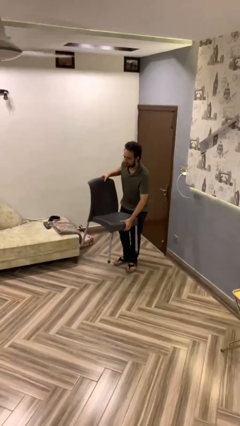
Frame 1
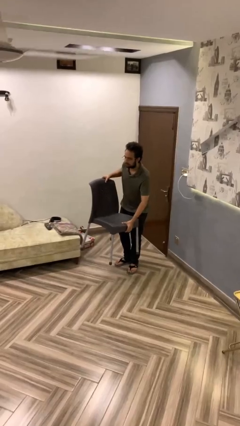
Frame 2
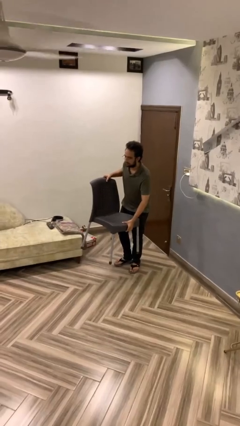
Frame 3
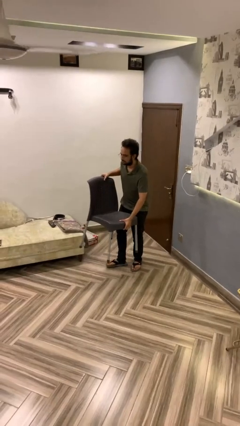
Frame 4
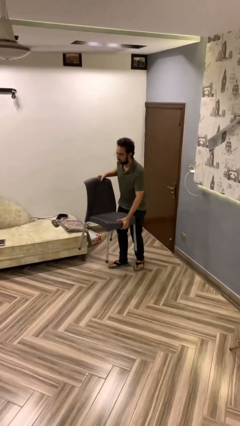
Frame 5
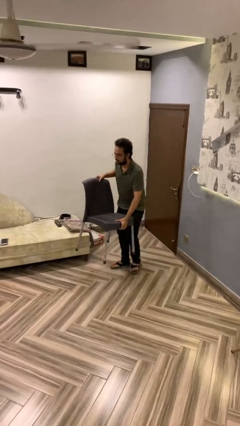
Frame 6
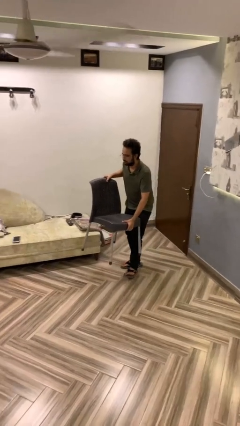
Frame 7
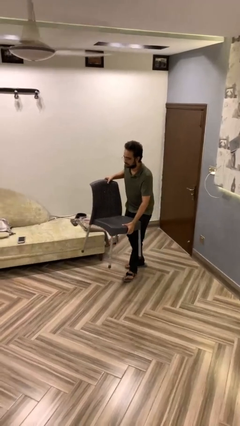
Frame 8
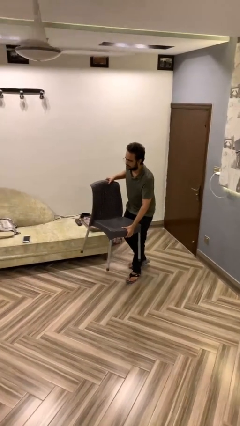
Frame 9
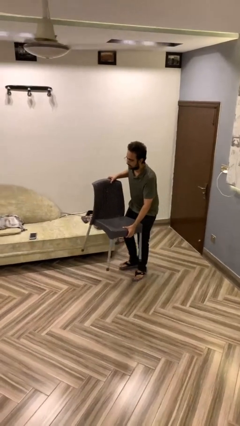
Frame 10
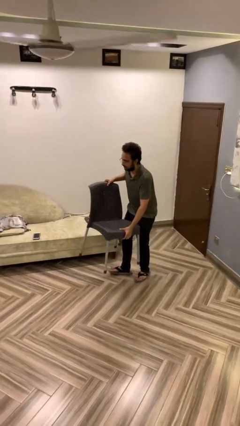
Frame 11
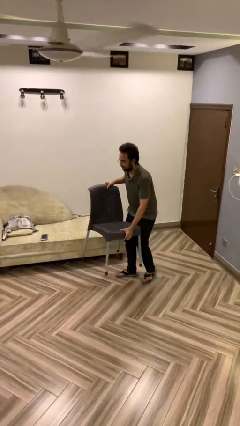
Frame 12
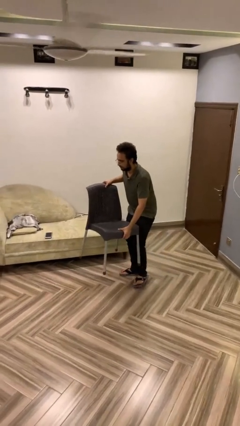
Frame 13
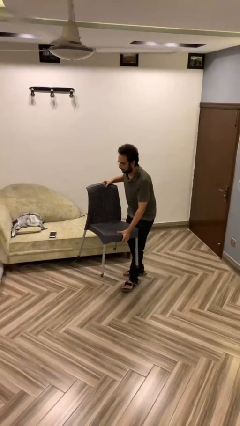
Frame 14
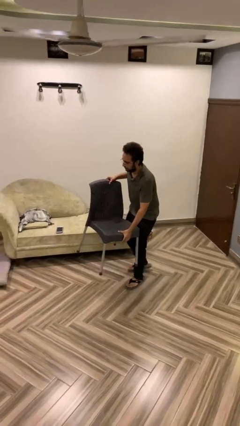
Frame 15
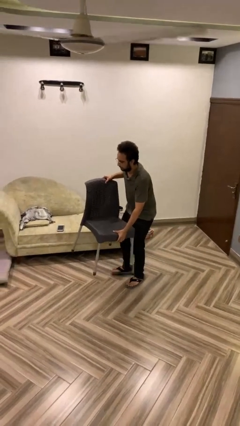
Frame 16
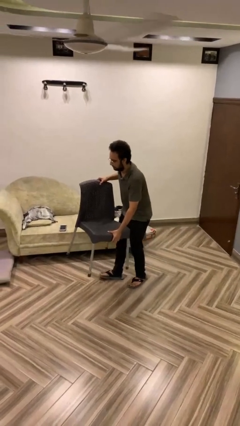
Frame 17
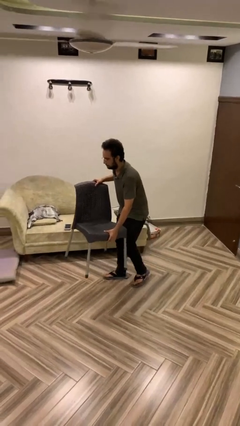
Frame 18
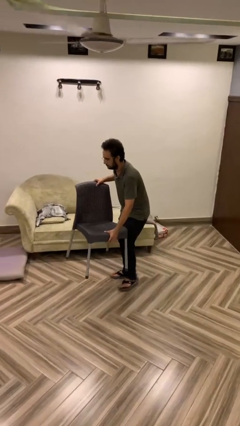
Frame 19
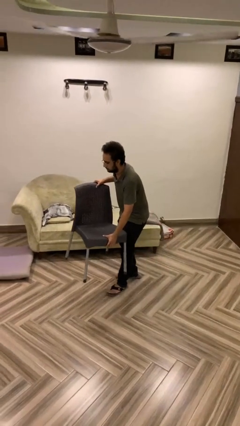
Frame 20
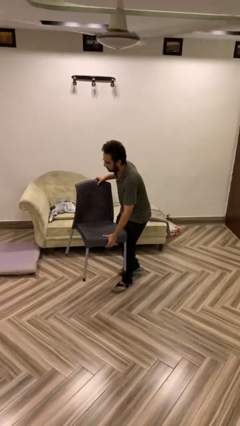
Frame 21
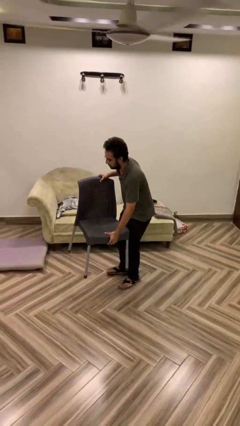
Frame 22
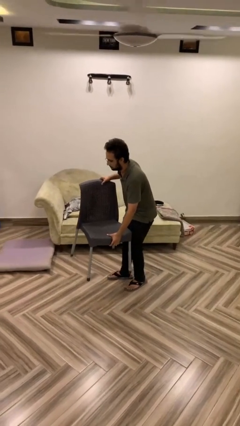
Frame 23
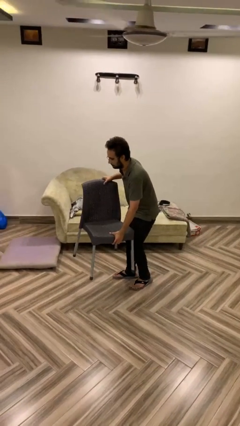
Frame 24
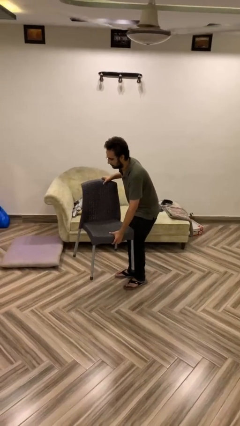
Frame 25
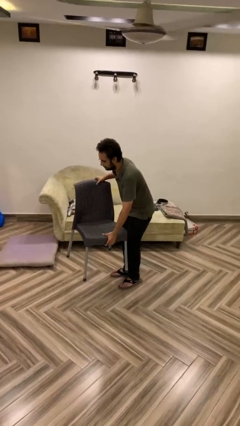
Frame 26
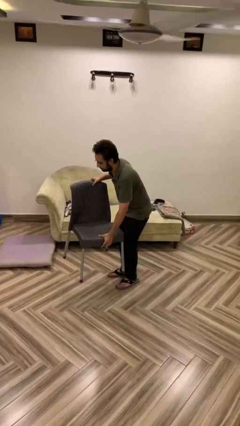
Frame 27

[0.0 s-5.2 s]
person carries heavy object

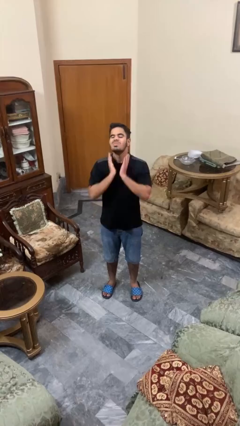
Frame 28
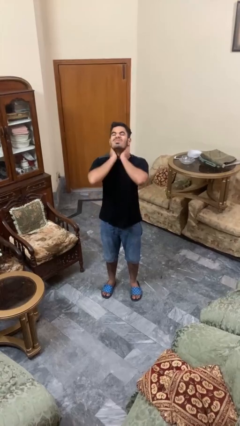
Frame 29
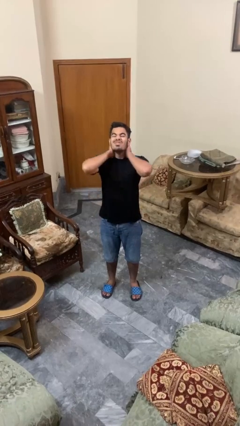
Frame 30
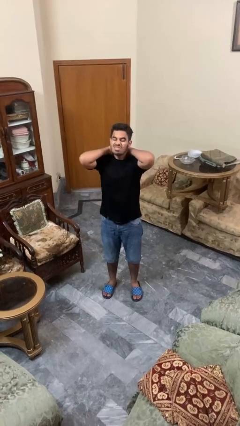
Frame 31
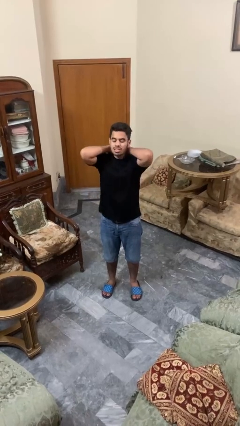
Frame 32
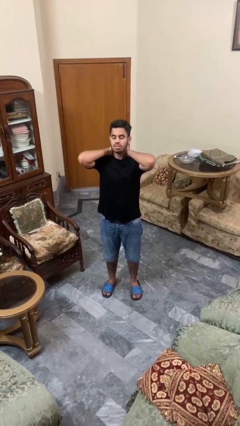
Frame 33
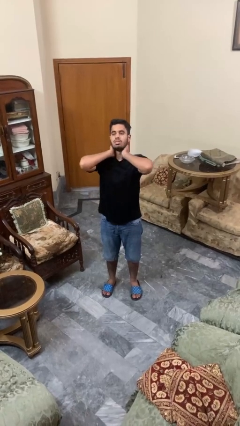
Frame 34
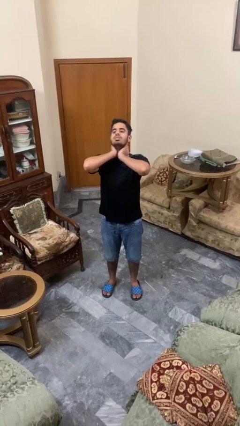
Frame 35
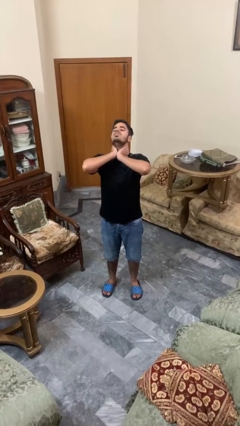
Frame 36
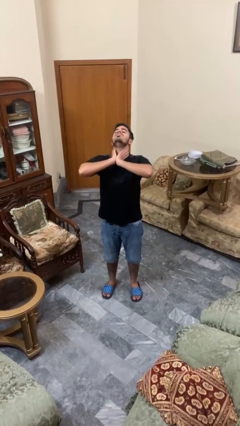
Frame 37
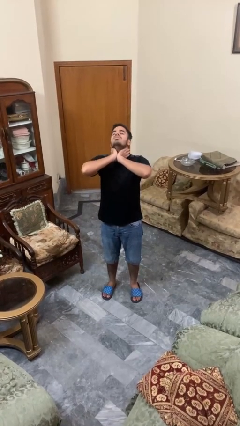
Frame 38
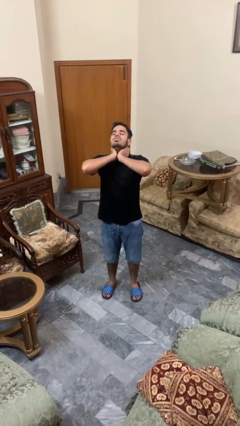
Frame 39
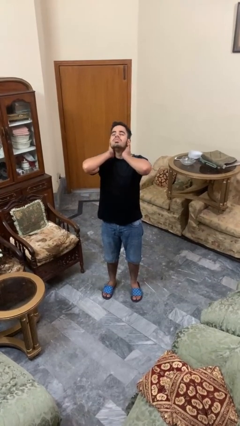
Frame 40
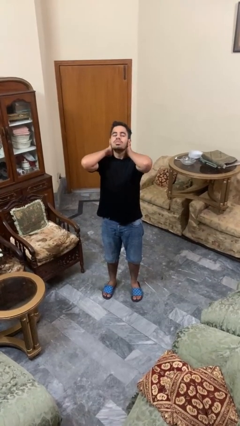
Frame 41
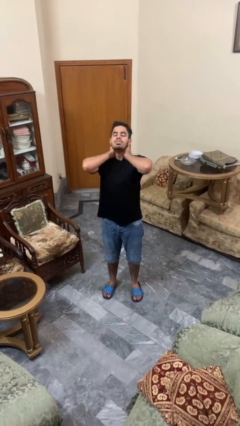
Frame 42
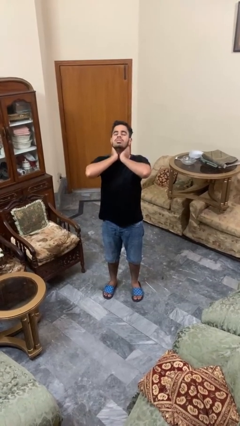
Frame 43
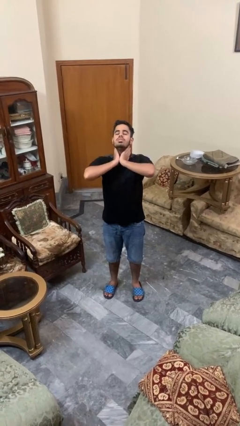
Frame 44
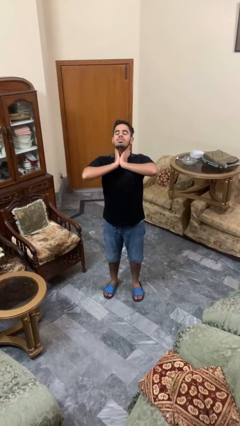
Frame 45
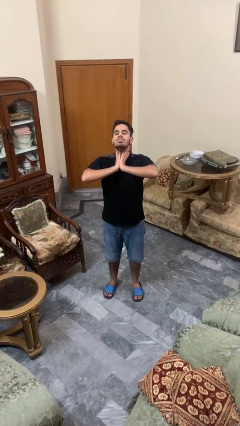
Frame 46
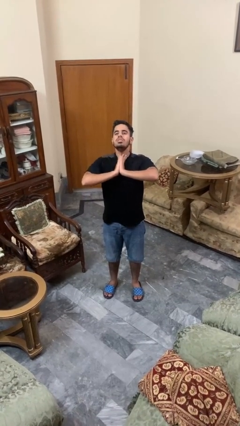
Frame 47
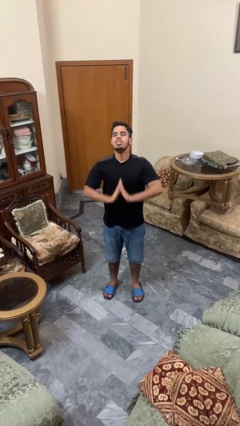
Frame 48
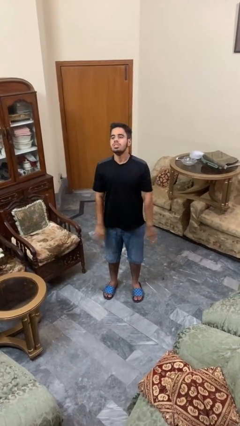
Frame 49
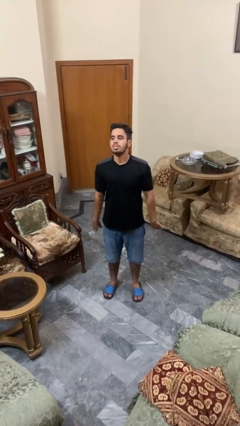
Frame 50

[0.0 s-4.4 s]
person rubs neck

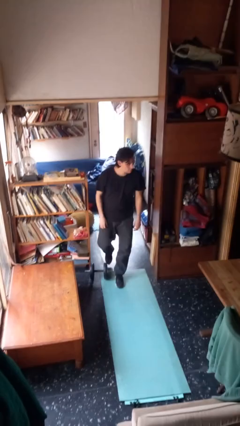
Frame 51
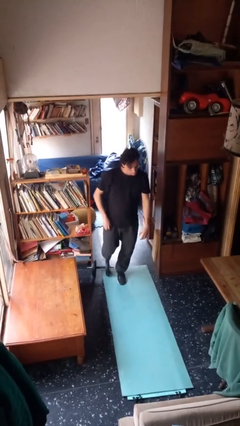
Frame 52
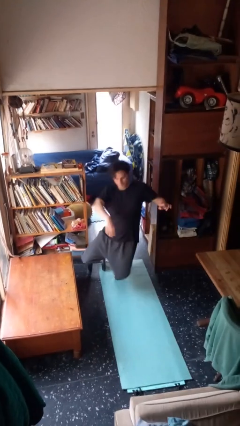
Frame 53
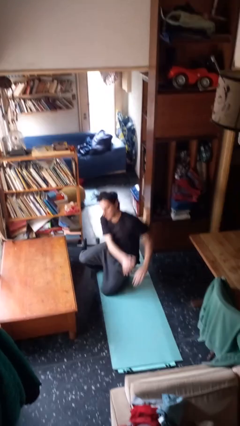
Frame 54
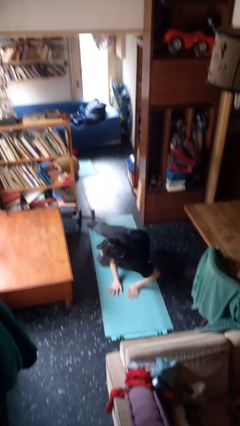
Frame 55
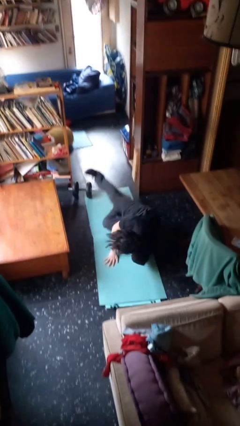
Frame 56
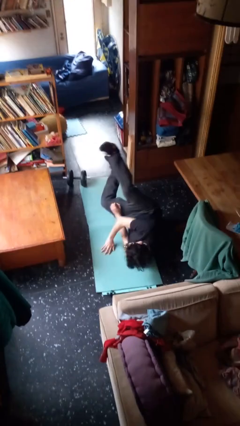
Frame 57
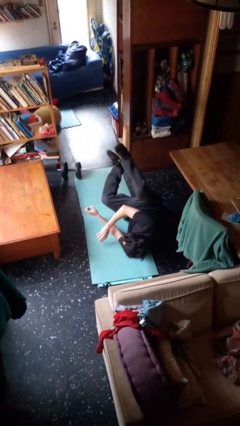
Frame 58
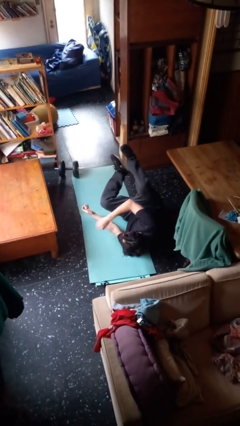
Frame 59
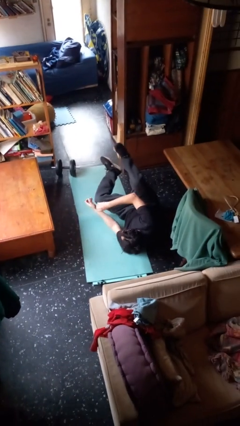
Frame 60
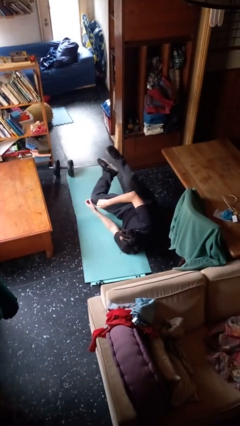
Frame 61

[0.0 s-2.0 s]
person trips on object on floor

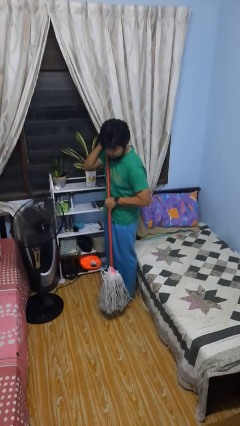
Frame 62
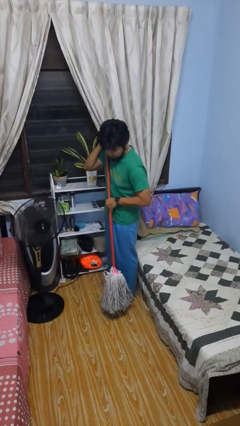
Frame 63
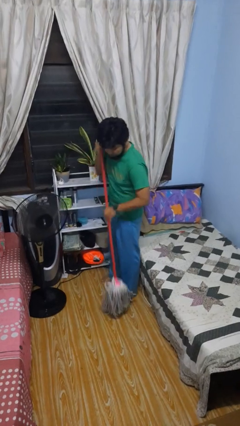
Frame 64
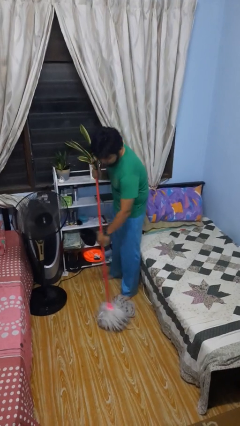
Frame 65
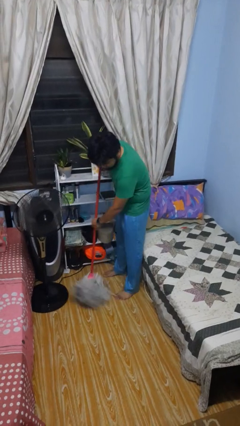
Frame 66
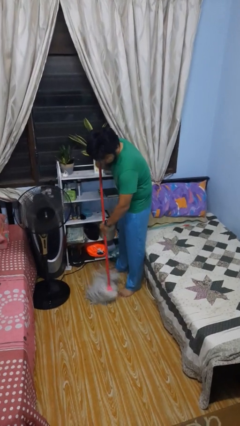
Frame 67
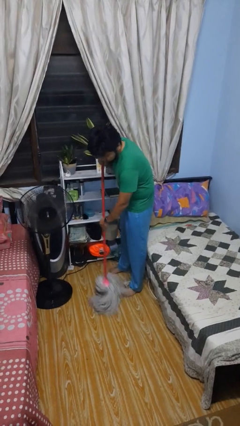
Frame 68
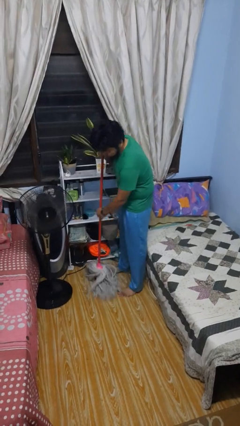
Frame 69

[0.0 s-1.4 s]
person mops

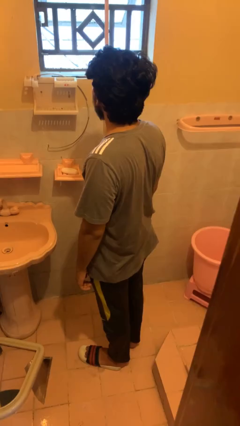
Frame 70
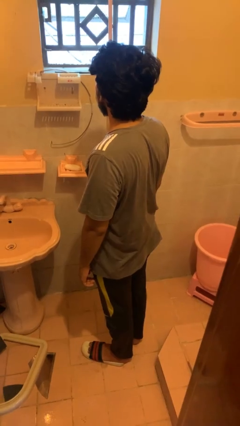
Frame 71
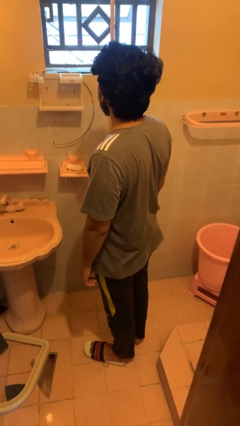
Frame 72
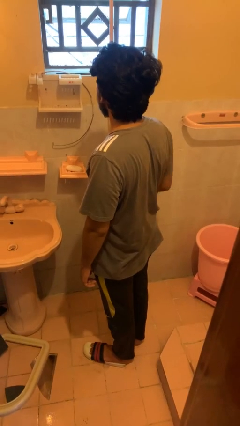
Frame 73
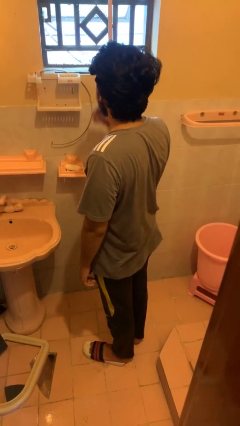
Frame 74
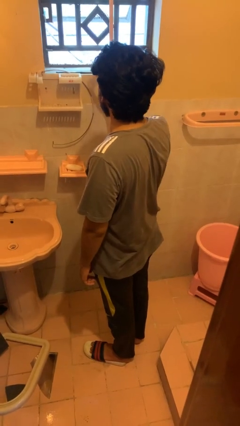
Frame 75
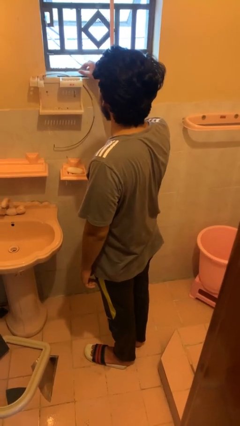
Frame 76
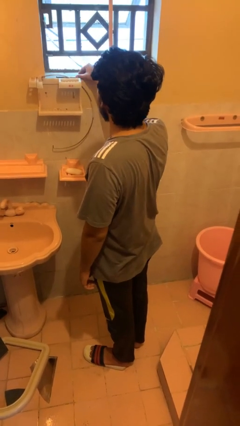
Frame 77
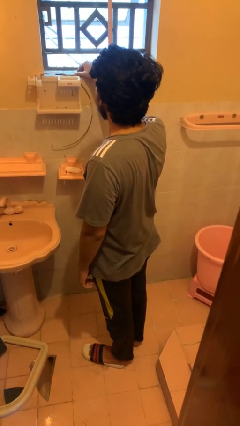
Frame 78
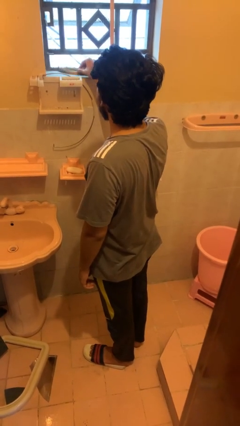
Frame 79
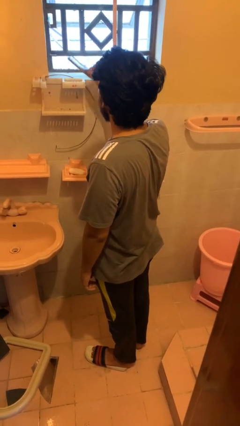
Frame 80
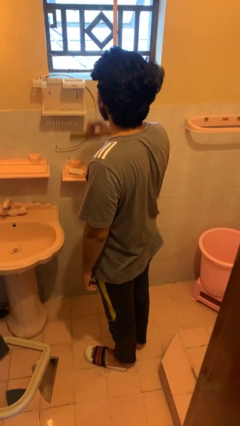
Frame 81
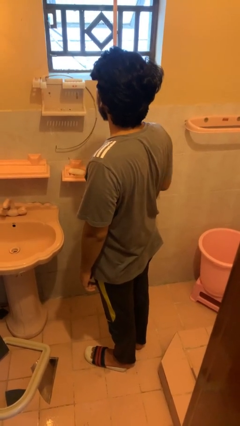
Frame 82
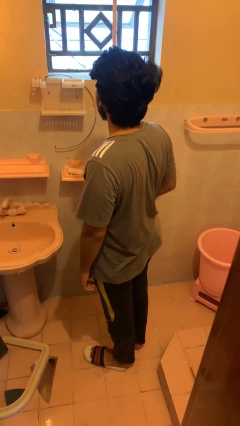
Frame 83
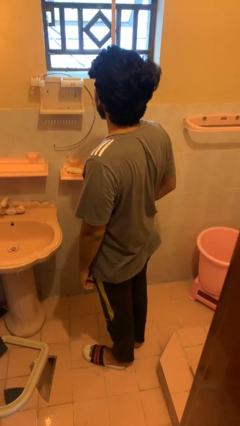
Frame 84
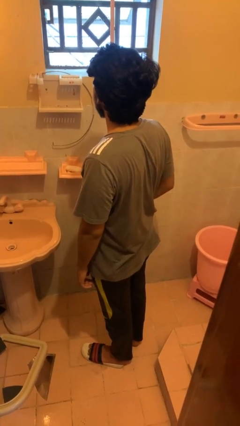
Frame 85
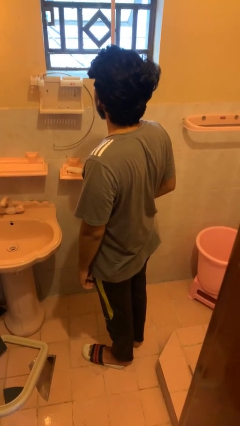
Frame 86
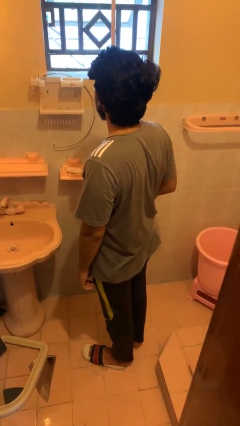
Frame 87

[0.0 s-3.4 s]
person picks up object from countertop

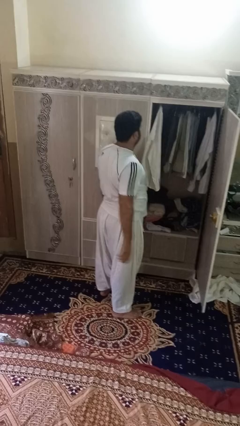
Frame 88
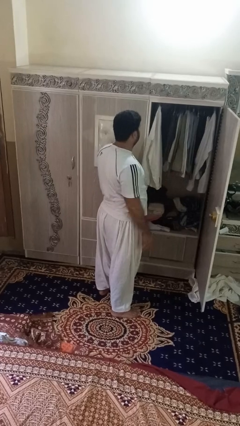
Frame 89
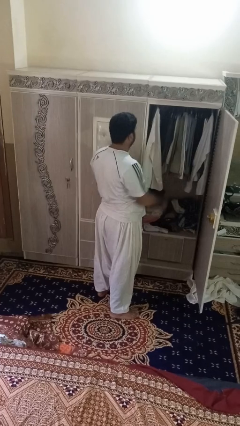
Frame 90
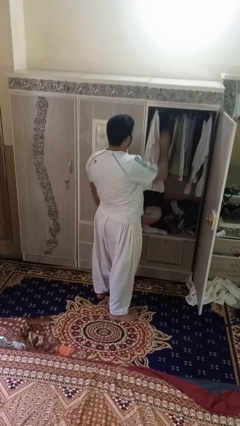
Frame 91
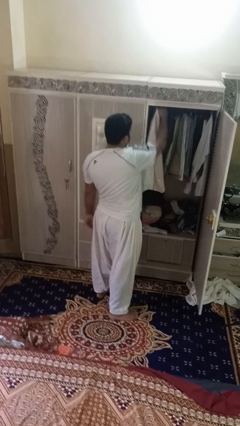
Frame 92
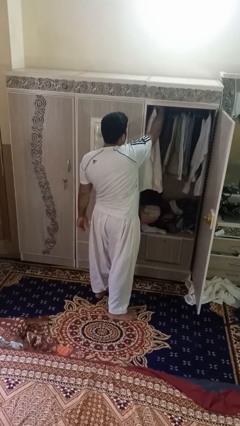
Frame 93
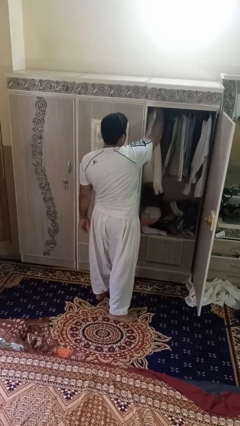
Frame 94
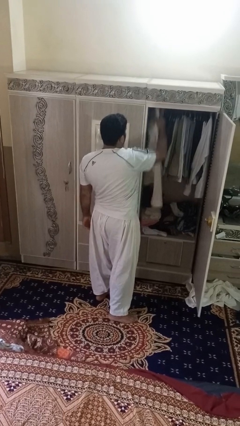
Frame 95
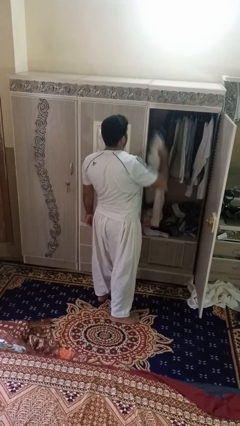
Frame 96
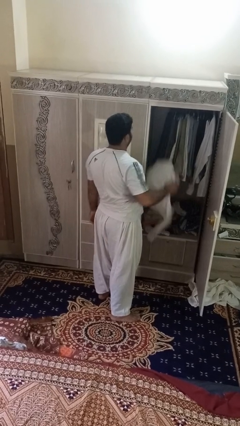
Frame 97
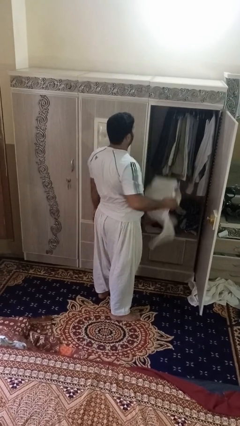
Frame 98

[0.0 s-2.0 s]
person takes clothes from closet
